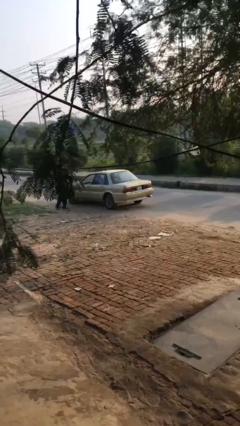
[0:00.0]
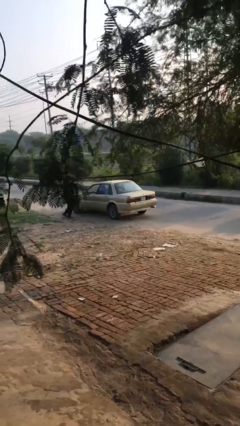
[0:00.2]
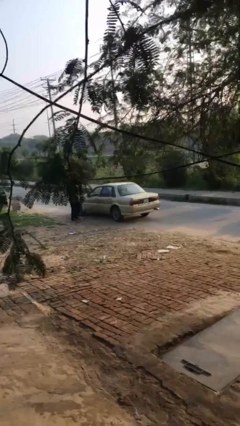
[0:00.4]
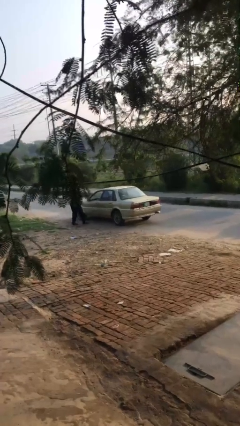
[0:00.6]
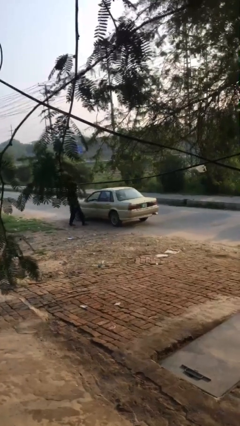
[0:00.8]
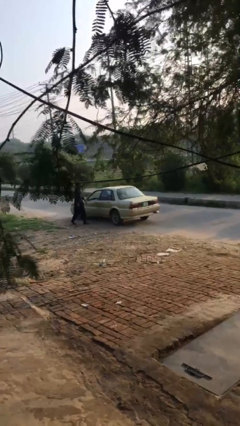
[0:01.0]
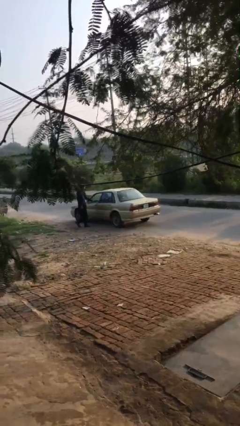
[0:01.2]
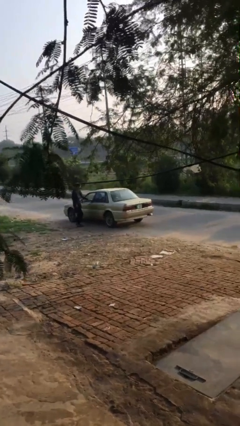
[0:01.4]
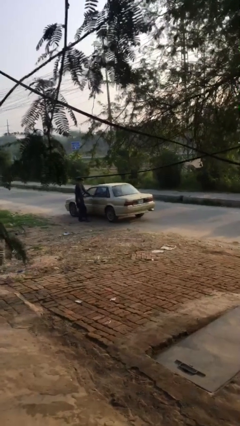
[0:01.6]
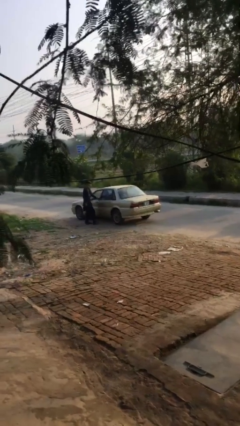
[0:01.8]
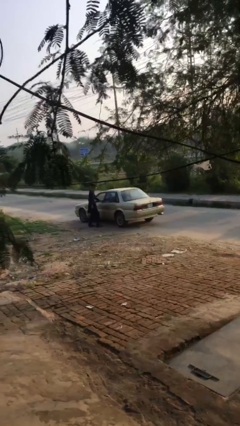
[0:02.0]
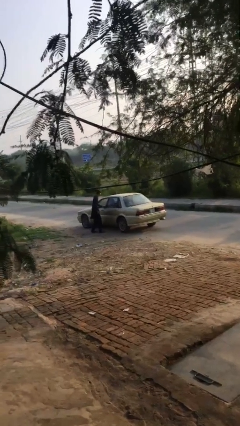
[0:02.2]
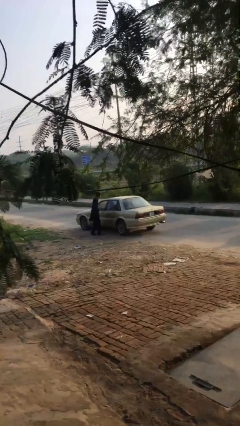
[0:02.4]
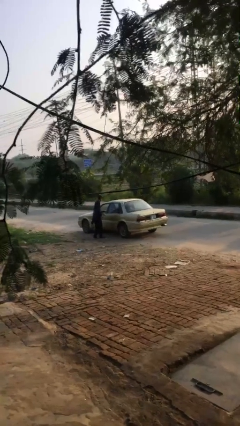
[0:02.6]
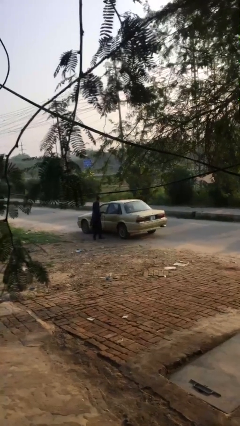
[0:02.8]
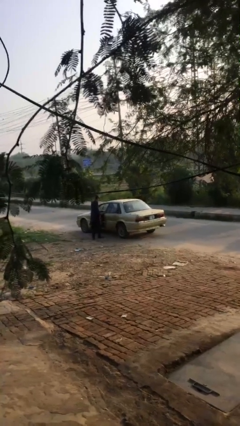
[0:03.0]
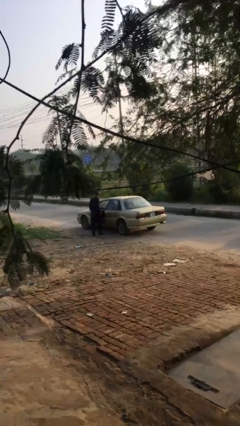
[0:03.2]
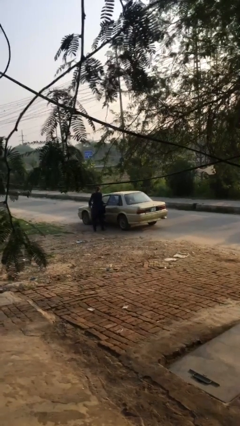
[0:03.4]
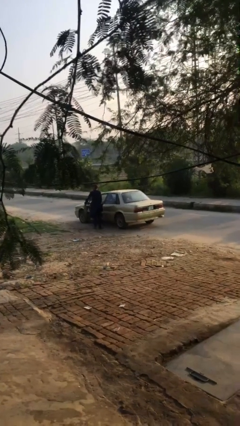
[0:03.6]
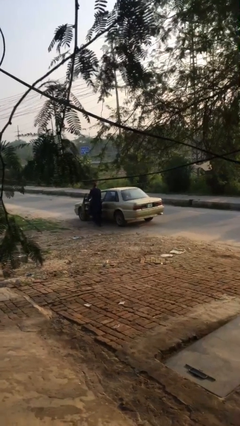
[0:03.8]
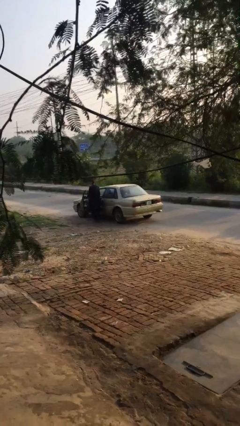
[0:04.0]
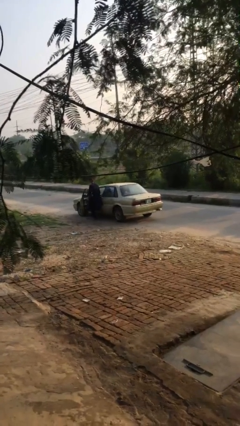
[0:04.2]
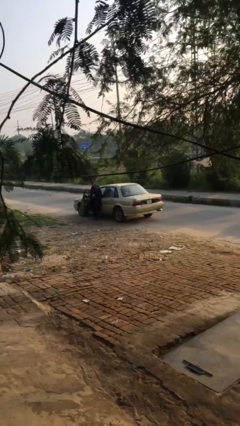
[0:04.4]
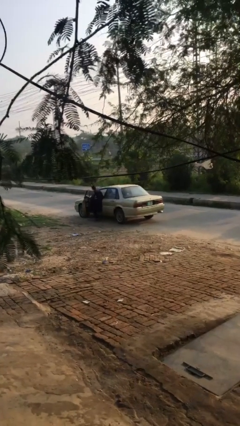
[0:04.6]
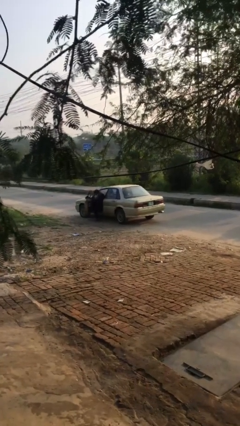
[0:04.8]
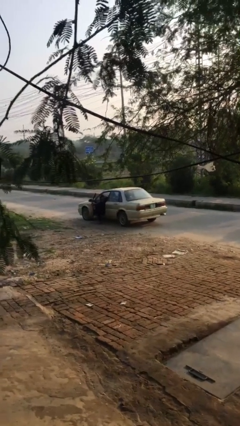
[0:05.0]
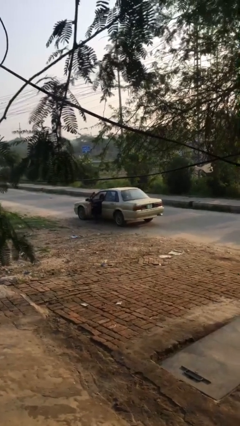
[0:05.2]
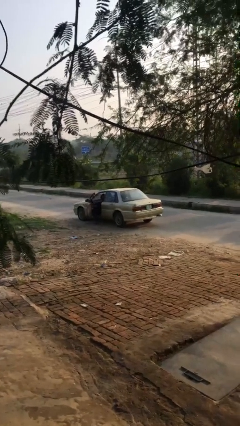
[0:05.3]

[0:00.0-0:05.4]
car picks up person

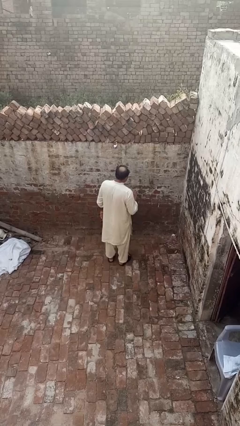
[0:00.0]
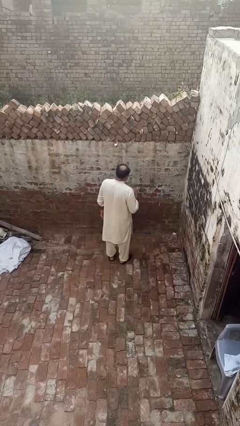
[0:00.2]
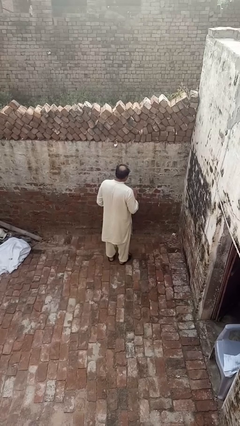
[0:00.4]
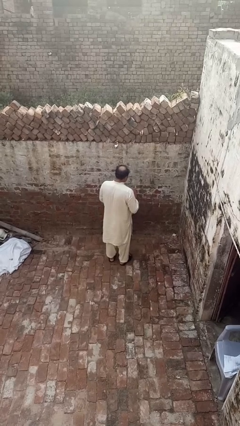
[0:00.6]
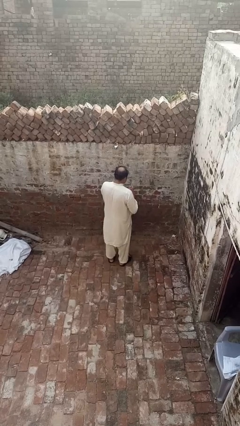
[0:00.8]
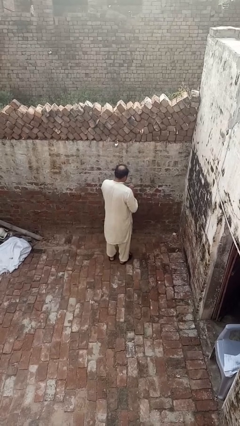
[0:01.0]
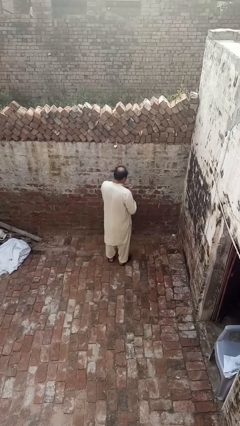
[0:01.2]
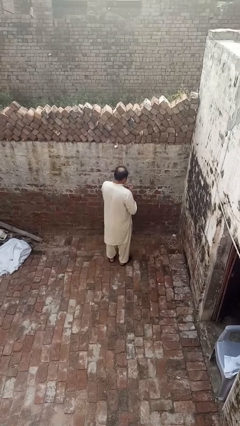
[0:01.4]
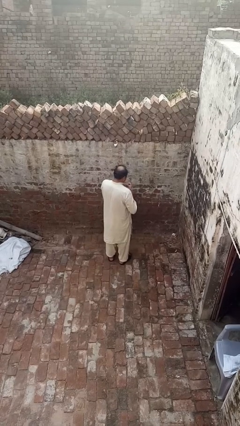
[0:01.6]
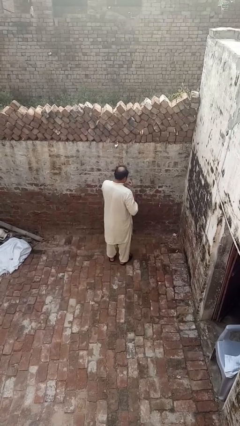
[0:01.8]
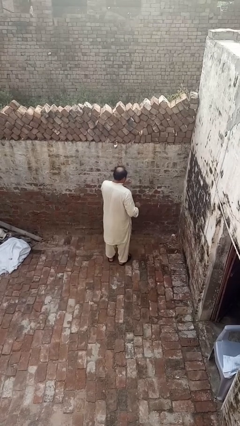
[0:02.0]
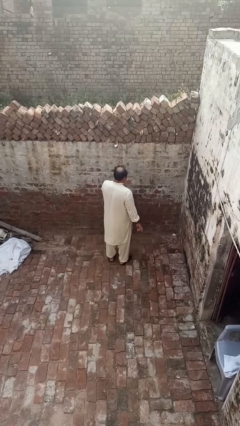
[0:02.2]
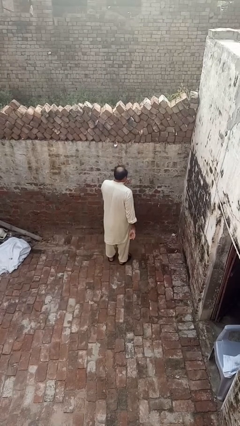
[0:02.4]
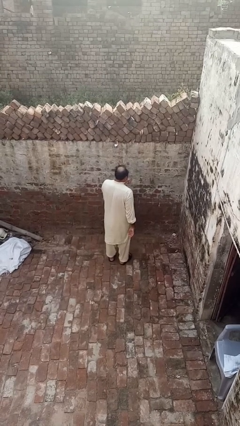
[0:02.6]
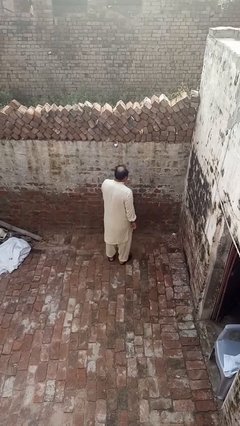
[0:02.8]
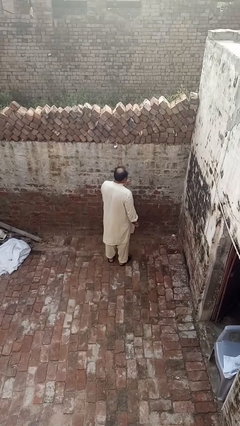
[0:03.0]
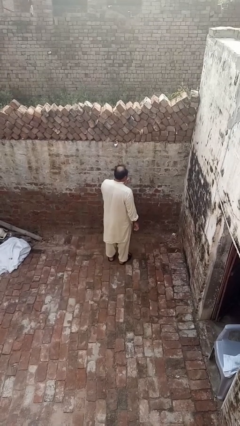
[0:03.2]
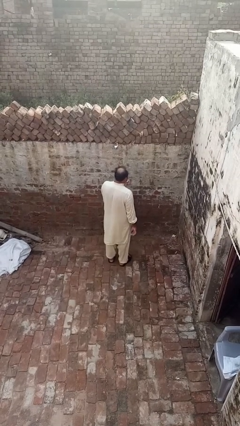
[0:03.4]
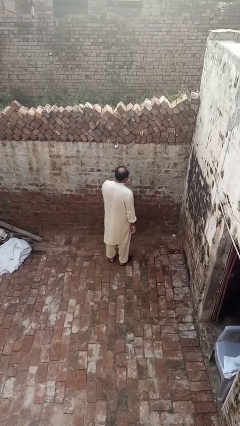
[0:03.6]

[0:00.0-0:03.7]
person takes off ring

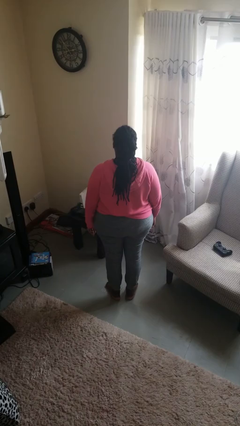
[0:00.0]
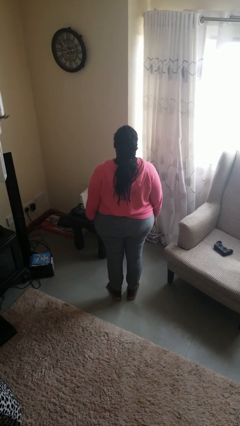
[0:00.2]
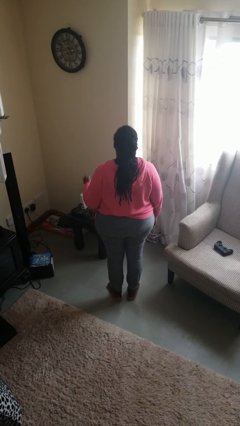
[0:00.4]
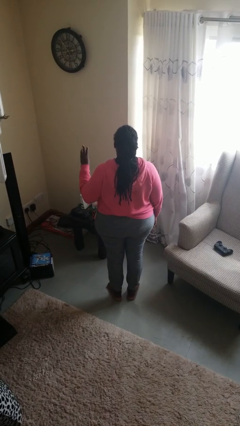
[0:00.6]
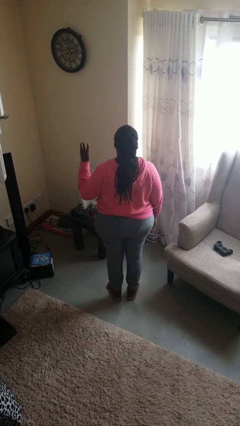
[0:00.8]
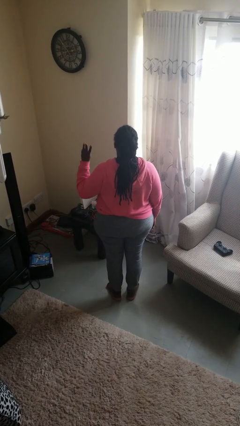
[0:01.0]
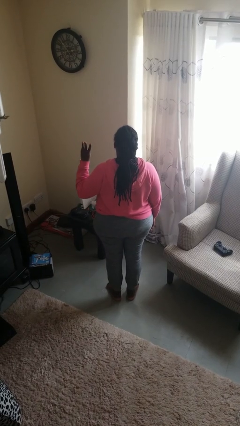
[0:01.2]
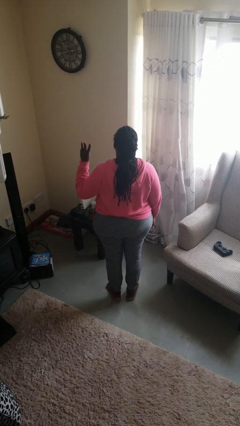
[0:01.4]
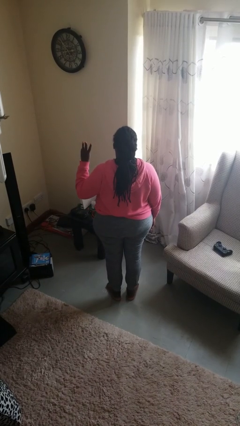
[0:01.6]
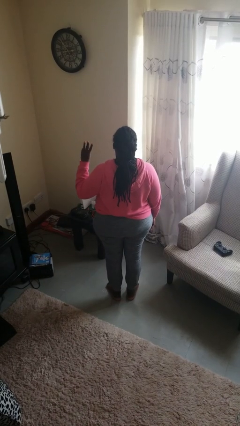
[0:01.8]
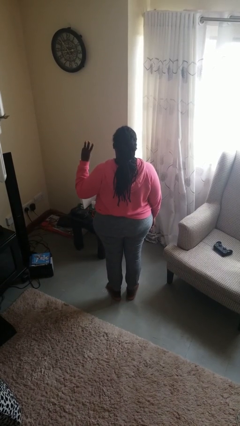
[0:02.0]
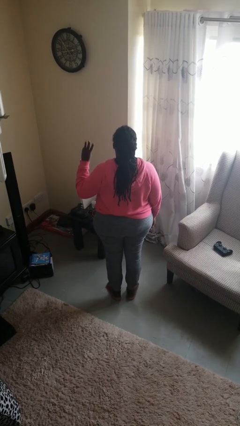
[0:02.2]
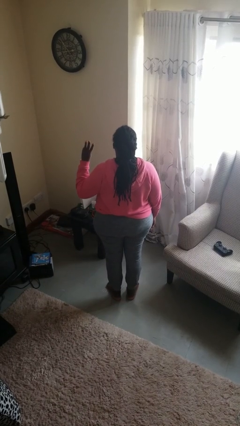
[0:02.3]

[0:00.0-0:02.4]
person gestures number three

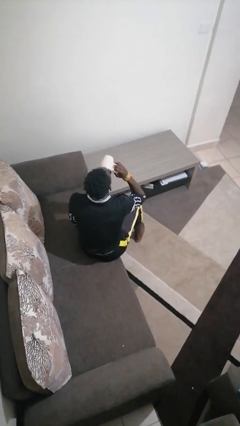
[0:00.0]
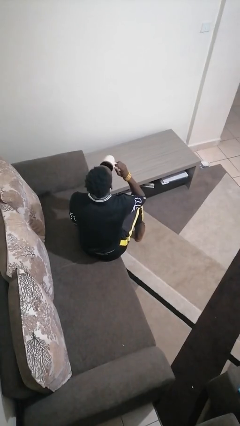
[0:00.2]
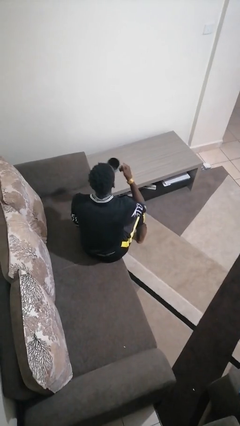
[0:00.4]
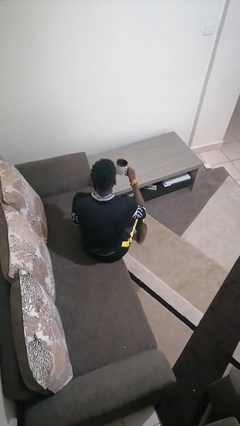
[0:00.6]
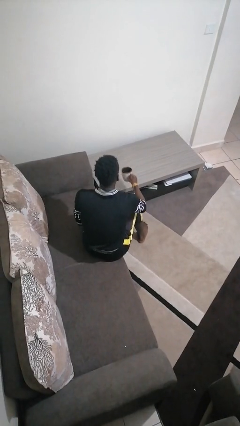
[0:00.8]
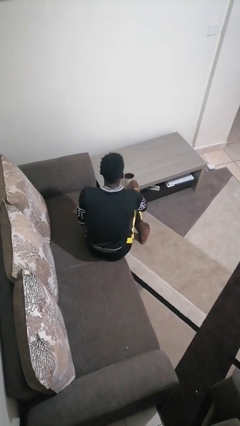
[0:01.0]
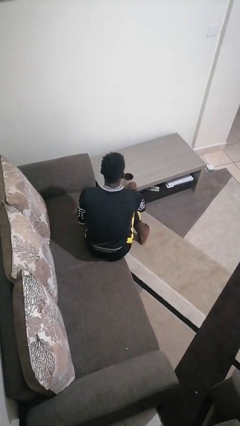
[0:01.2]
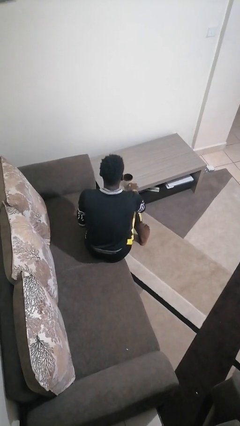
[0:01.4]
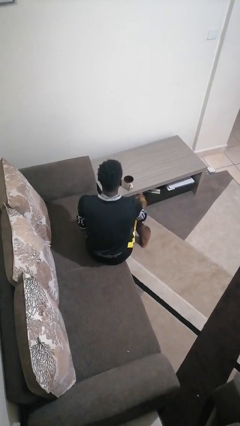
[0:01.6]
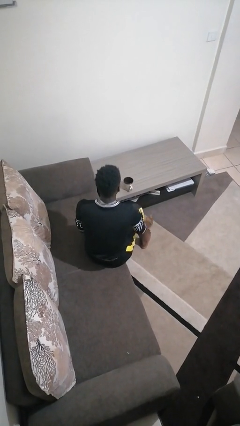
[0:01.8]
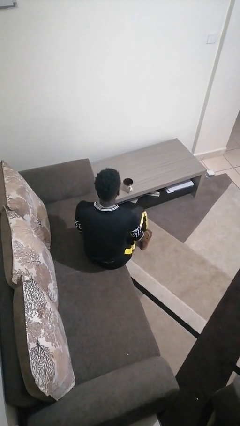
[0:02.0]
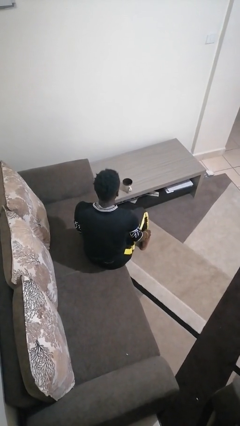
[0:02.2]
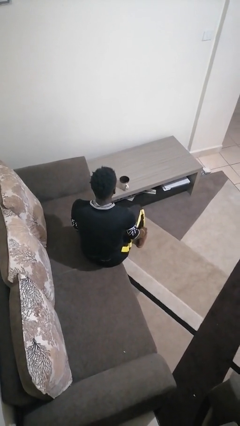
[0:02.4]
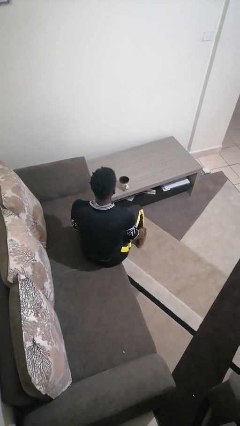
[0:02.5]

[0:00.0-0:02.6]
person puts down object on table

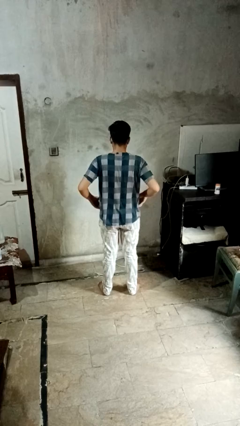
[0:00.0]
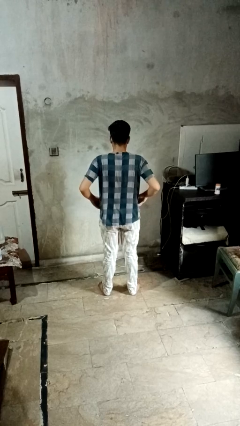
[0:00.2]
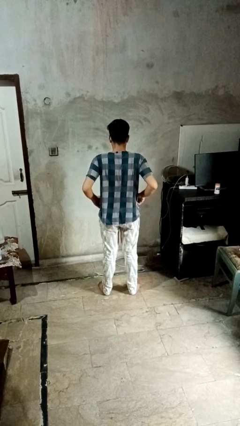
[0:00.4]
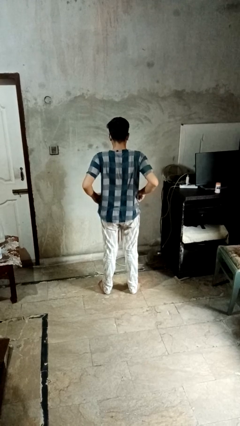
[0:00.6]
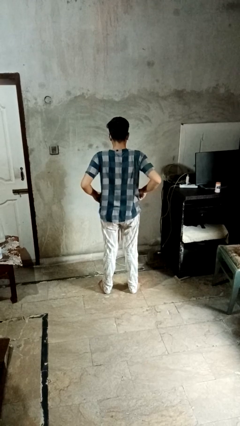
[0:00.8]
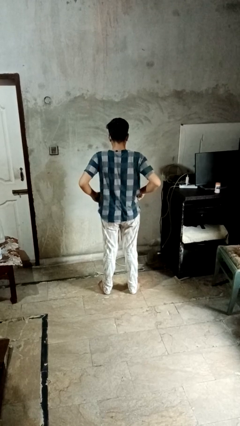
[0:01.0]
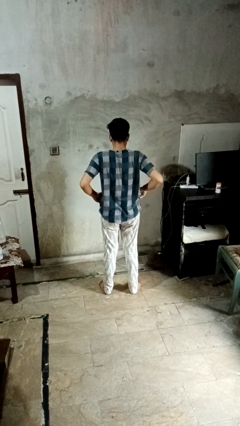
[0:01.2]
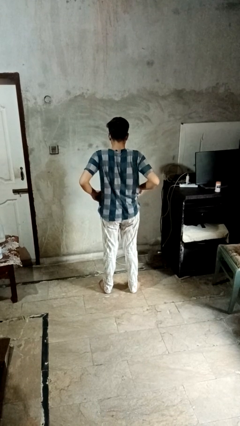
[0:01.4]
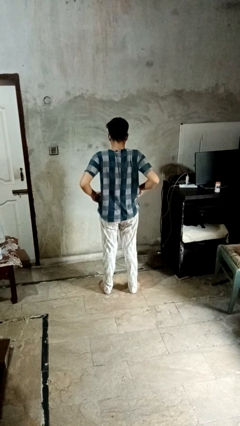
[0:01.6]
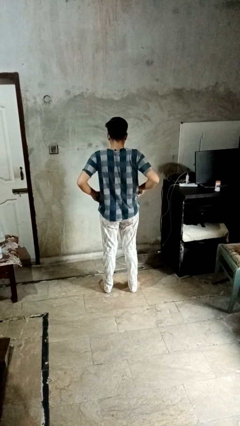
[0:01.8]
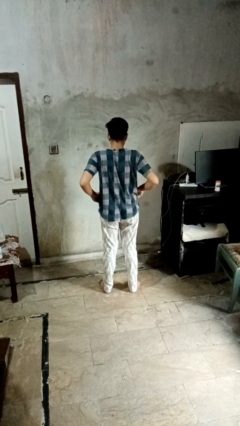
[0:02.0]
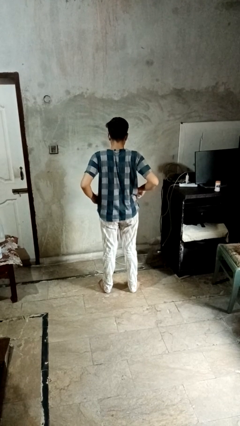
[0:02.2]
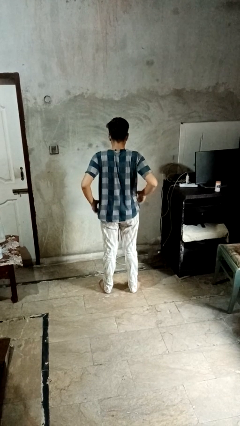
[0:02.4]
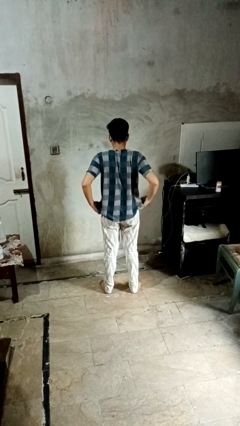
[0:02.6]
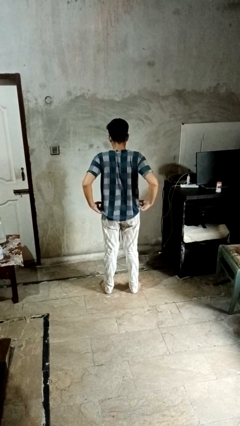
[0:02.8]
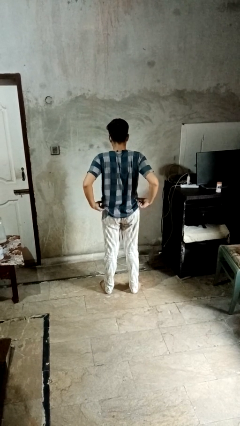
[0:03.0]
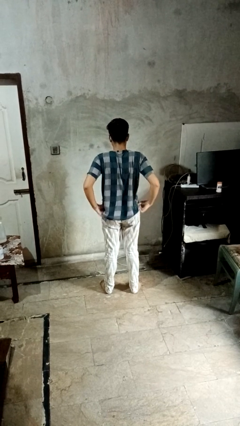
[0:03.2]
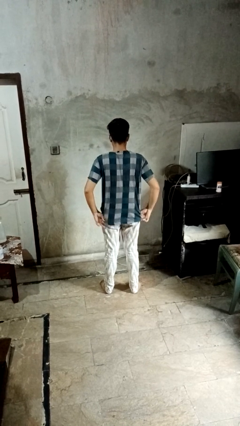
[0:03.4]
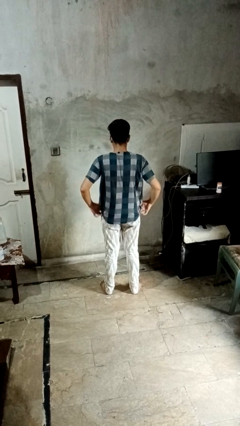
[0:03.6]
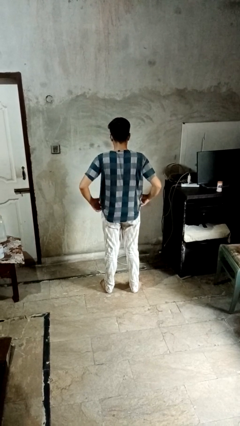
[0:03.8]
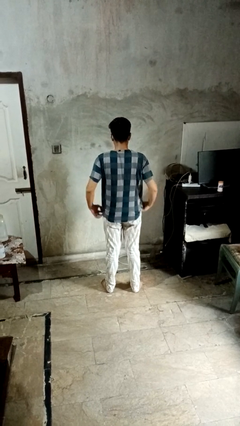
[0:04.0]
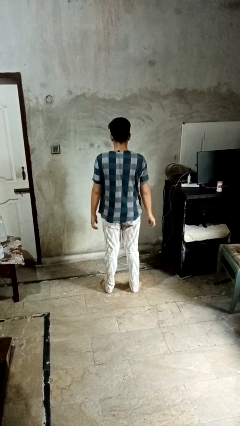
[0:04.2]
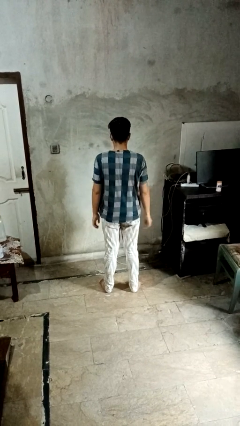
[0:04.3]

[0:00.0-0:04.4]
person hikes up pants
